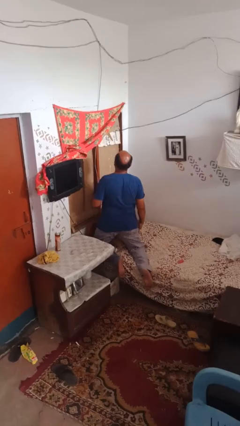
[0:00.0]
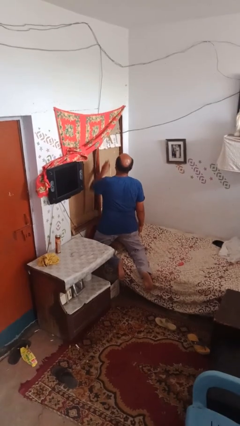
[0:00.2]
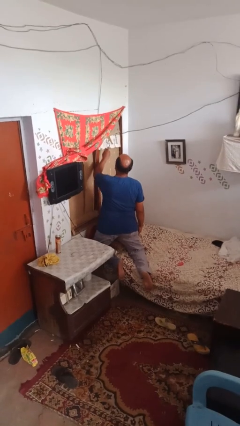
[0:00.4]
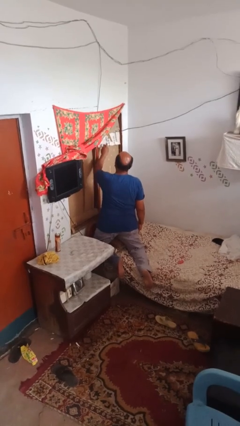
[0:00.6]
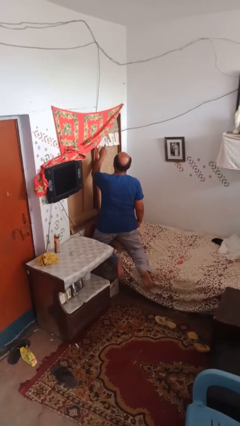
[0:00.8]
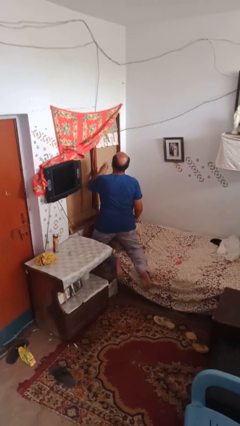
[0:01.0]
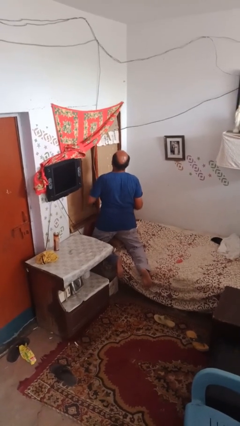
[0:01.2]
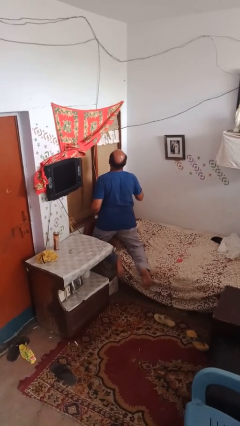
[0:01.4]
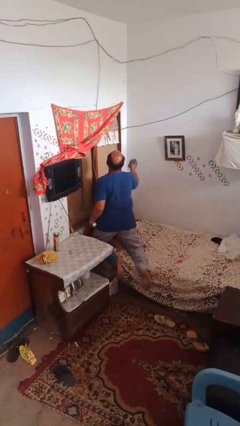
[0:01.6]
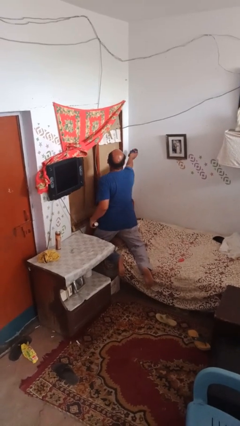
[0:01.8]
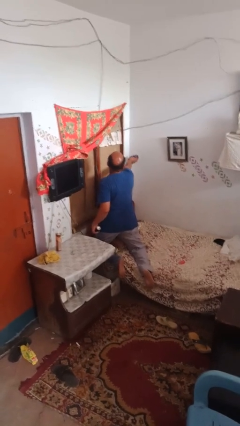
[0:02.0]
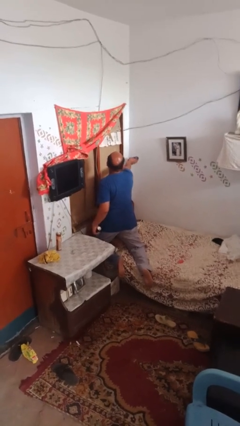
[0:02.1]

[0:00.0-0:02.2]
person sprays from bottle

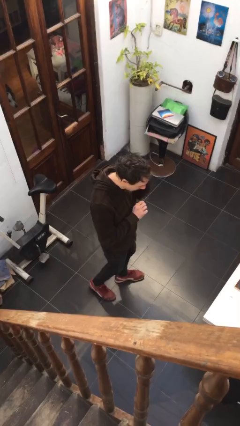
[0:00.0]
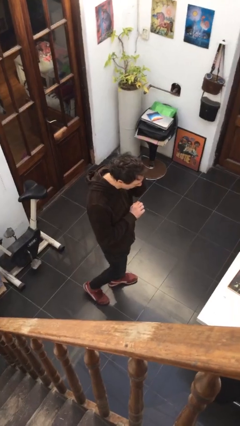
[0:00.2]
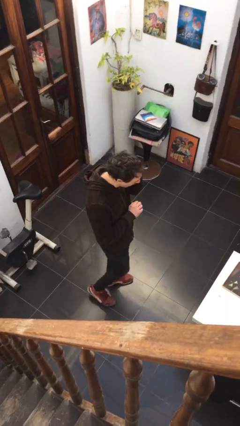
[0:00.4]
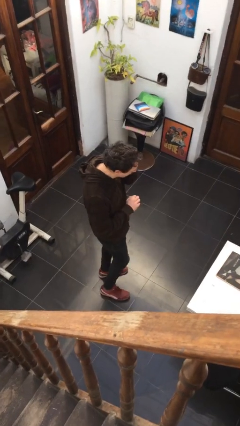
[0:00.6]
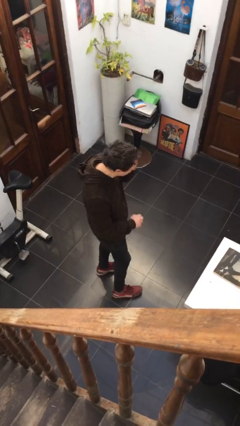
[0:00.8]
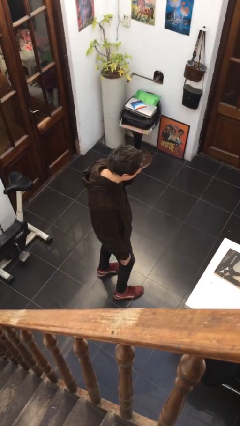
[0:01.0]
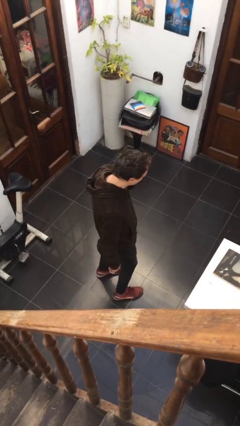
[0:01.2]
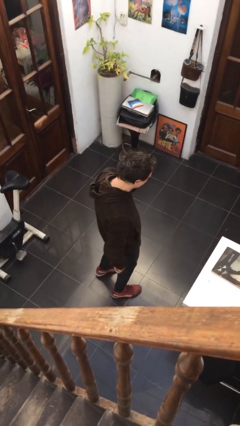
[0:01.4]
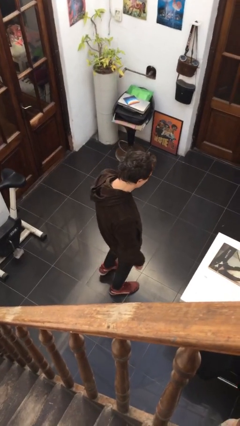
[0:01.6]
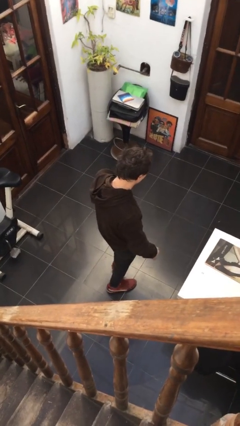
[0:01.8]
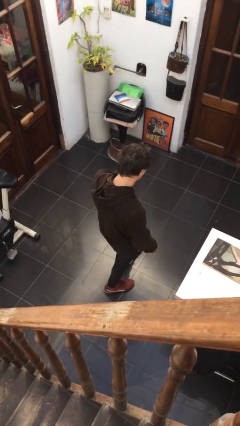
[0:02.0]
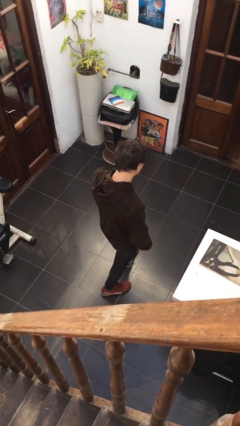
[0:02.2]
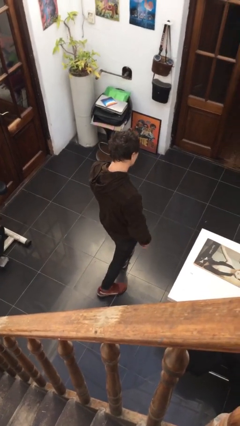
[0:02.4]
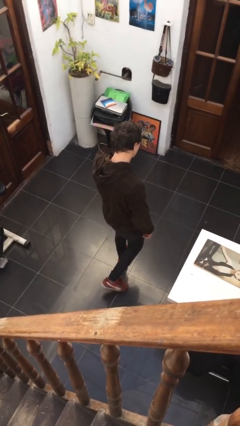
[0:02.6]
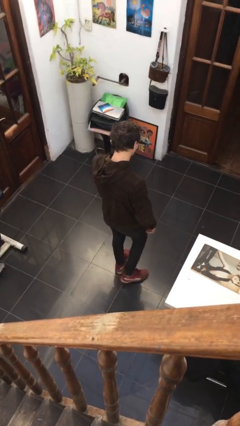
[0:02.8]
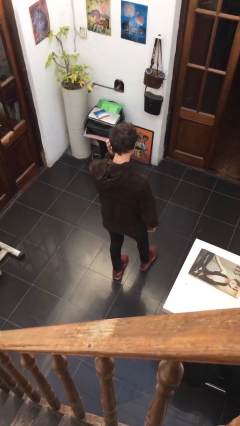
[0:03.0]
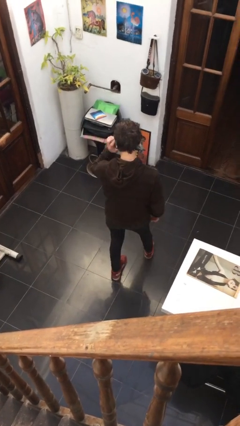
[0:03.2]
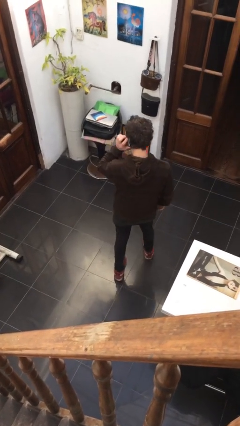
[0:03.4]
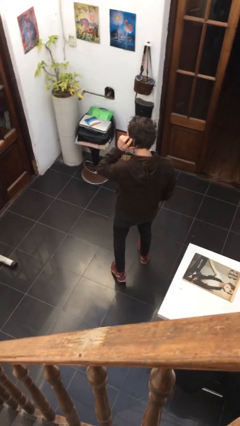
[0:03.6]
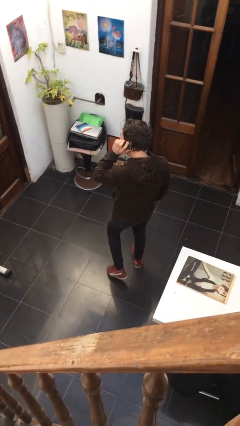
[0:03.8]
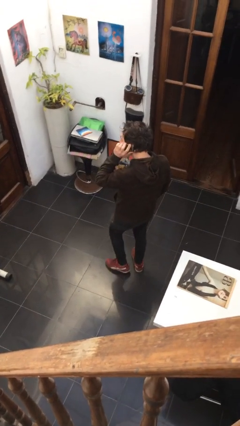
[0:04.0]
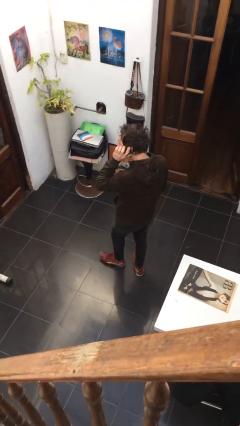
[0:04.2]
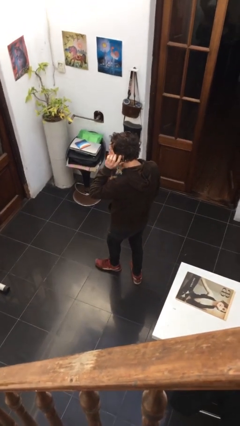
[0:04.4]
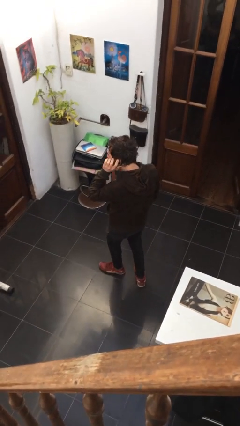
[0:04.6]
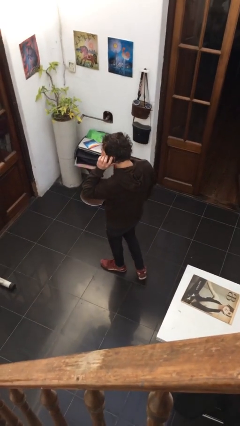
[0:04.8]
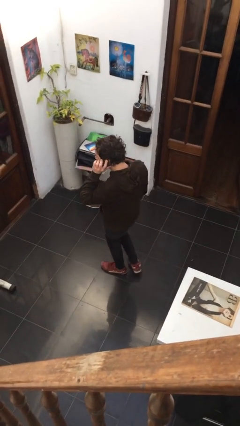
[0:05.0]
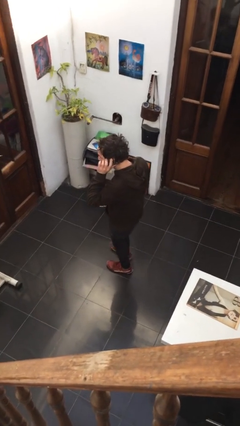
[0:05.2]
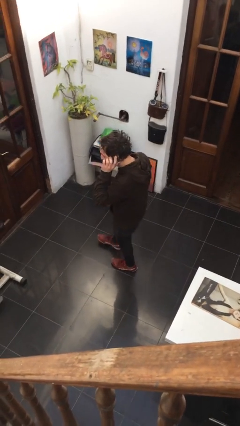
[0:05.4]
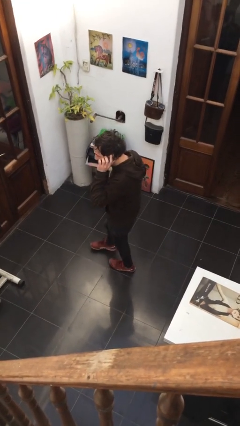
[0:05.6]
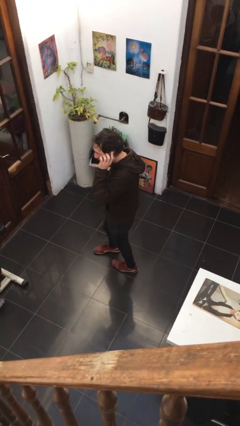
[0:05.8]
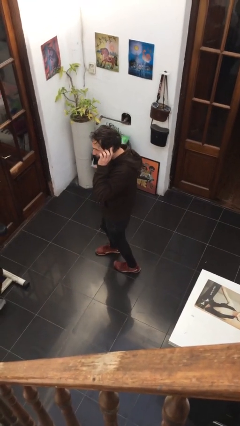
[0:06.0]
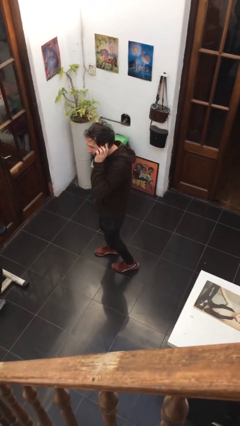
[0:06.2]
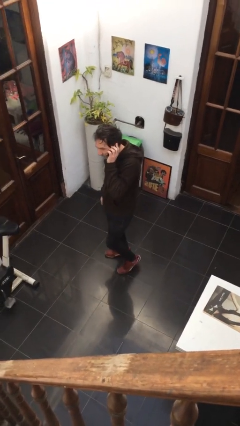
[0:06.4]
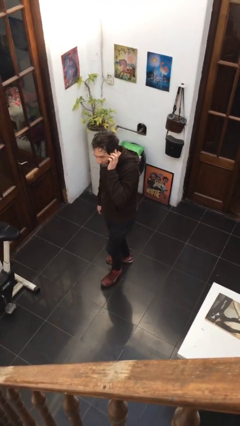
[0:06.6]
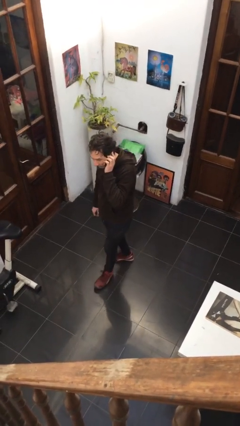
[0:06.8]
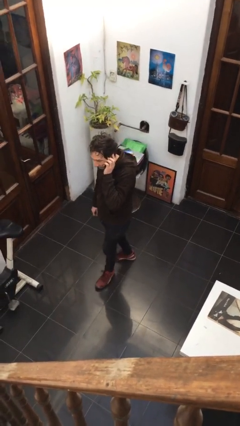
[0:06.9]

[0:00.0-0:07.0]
person talks on phone

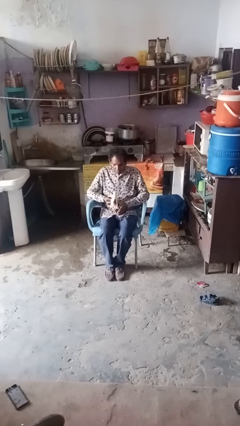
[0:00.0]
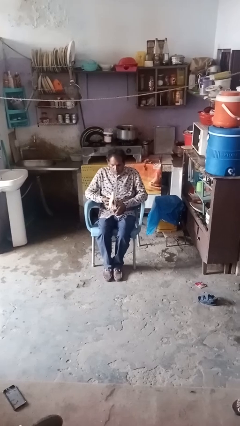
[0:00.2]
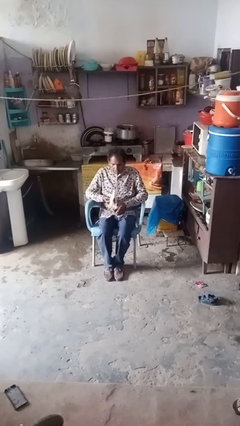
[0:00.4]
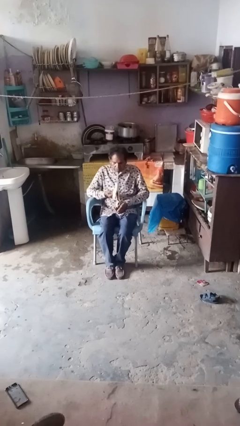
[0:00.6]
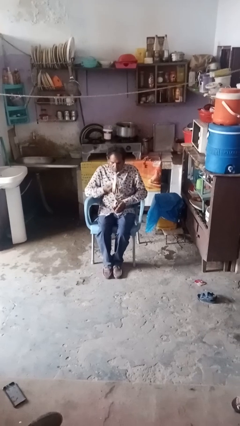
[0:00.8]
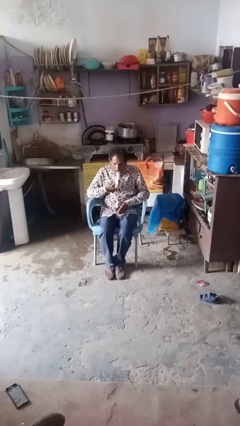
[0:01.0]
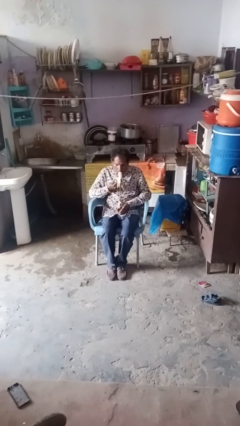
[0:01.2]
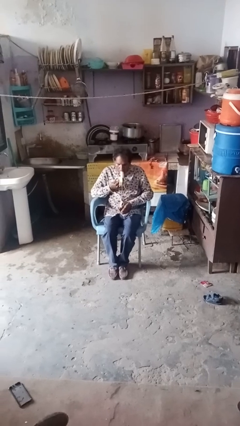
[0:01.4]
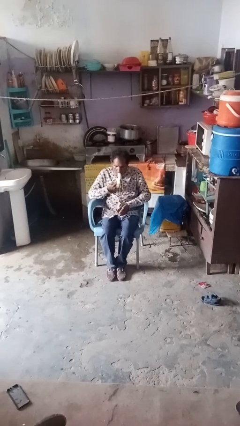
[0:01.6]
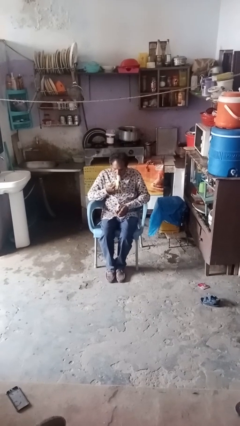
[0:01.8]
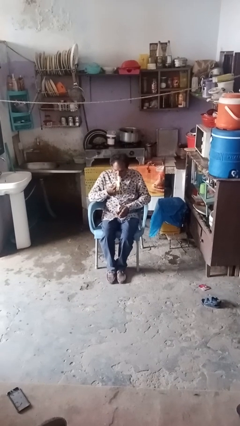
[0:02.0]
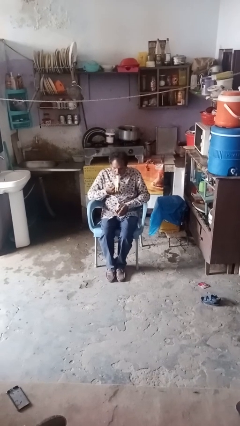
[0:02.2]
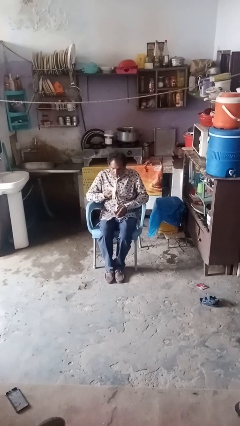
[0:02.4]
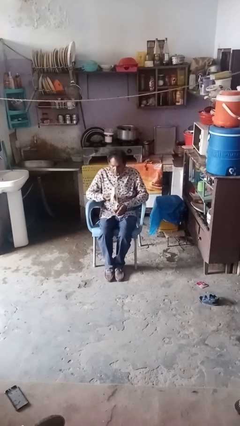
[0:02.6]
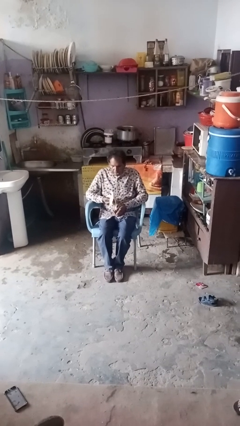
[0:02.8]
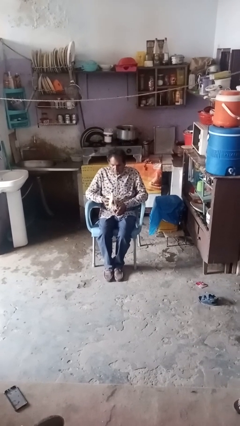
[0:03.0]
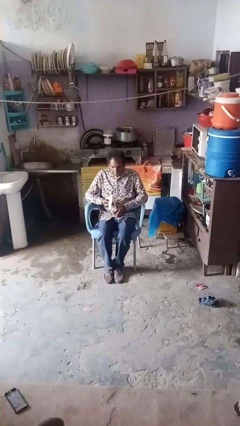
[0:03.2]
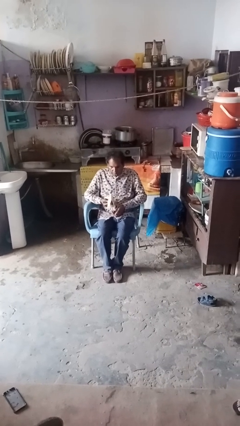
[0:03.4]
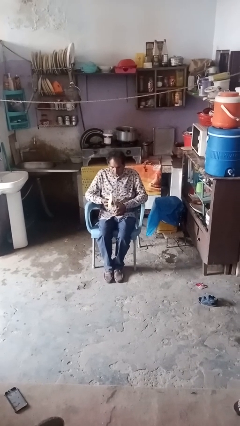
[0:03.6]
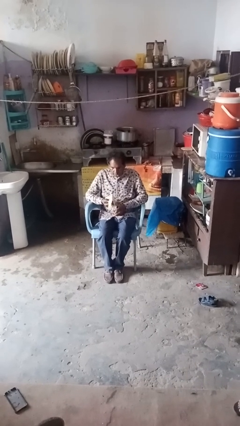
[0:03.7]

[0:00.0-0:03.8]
person eats banana

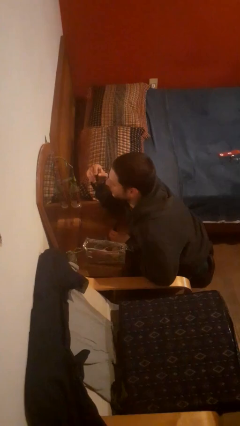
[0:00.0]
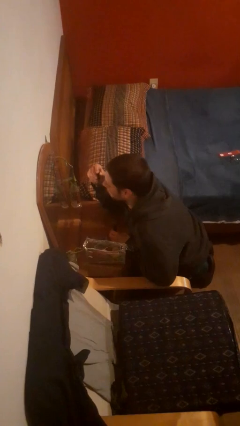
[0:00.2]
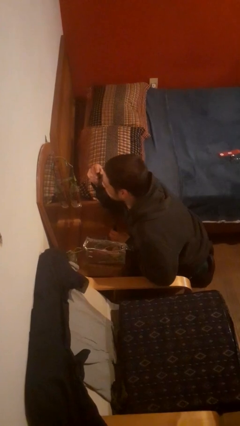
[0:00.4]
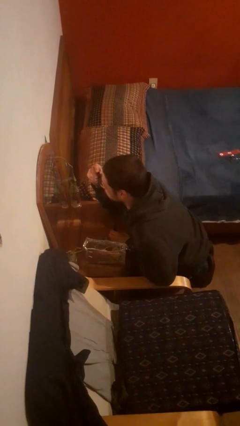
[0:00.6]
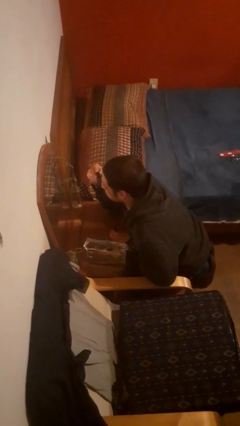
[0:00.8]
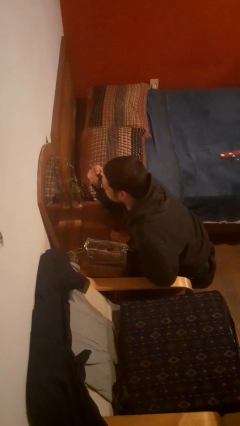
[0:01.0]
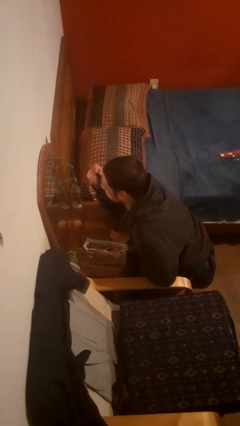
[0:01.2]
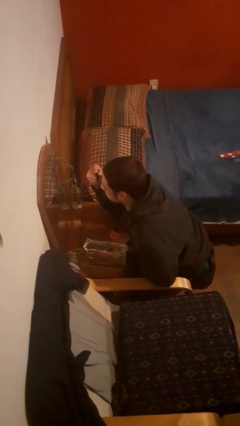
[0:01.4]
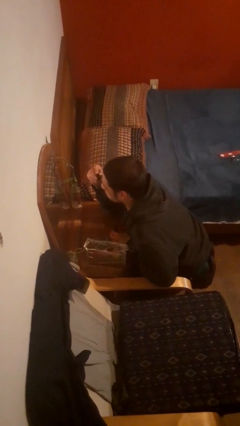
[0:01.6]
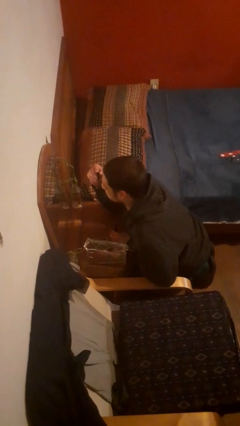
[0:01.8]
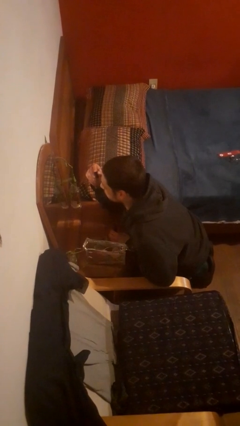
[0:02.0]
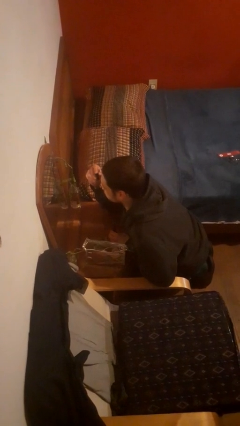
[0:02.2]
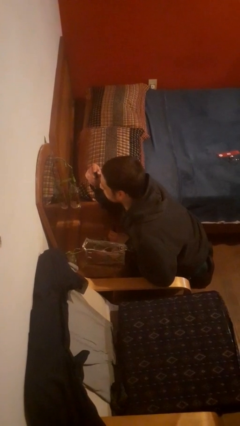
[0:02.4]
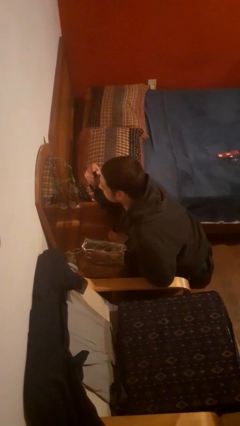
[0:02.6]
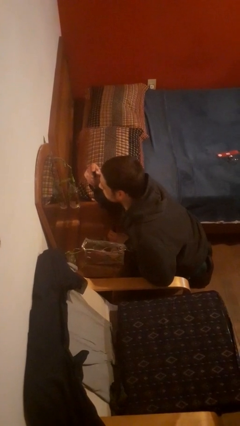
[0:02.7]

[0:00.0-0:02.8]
person applies eye makeup

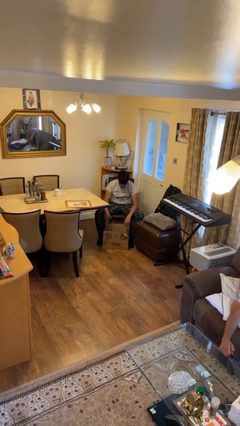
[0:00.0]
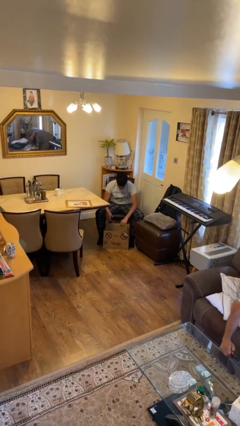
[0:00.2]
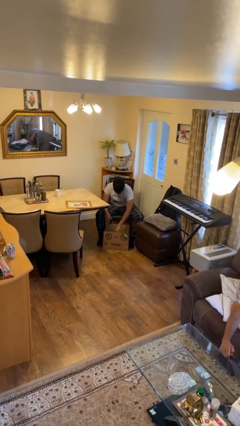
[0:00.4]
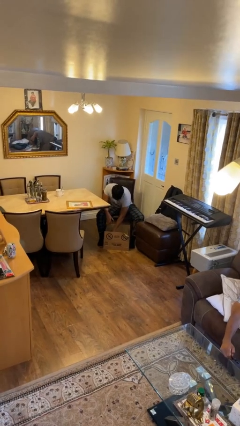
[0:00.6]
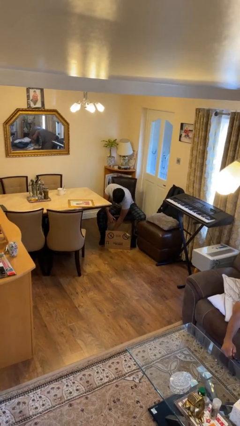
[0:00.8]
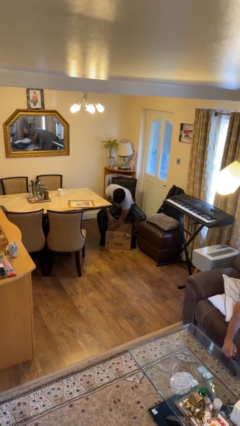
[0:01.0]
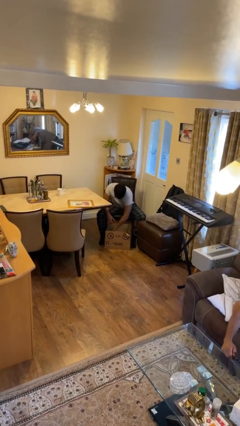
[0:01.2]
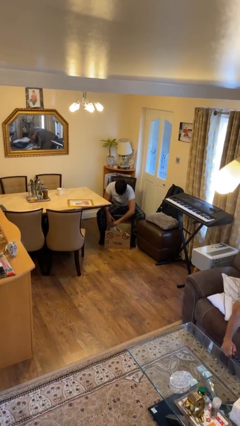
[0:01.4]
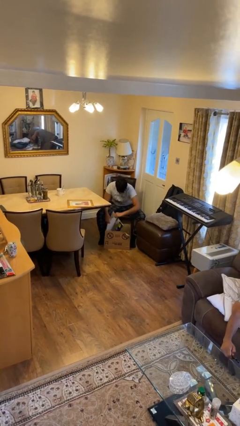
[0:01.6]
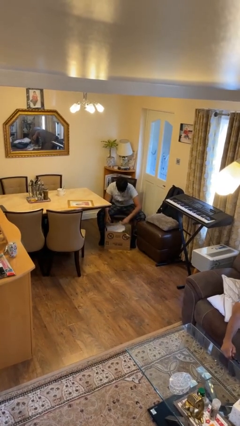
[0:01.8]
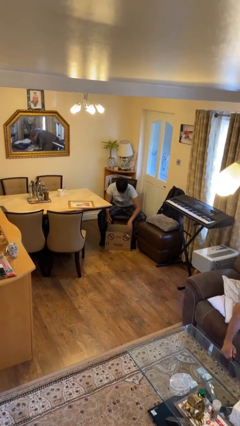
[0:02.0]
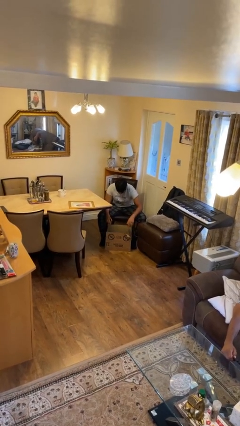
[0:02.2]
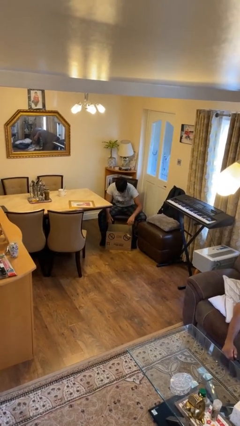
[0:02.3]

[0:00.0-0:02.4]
person searches in box
